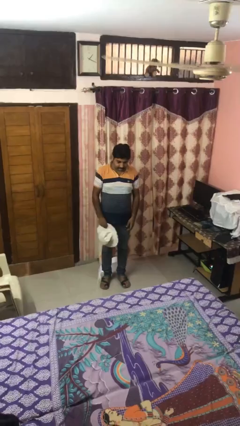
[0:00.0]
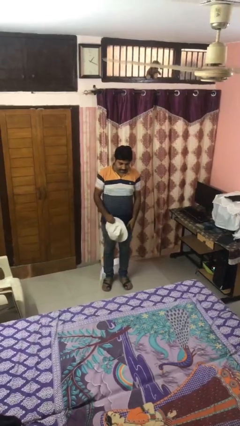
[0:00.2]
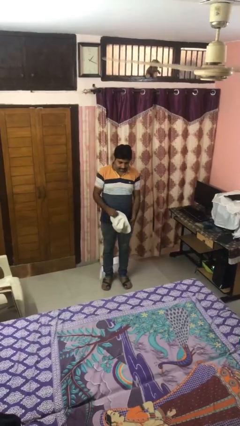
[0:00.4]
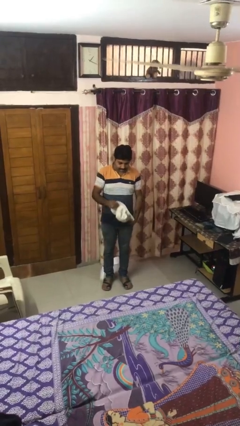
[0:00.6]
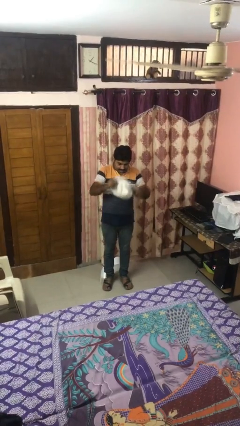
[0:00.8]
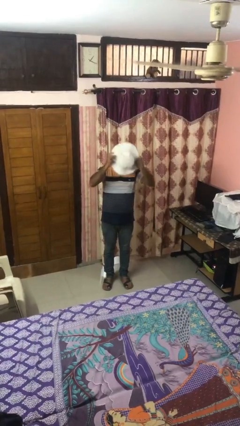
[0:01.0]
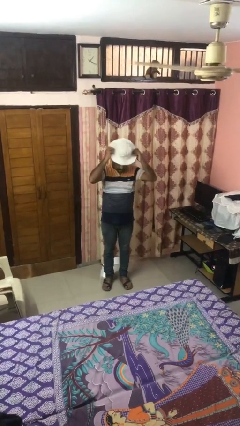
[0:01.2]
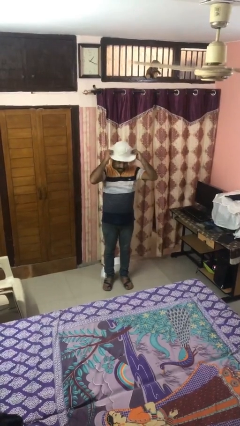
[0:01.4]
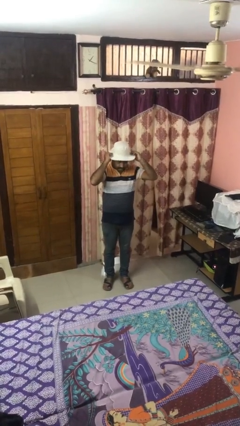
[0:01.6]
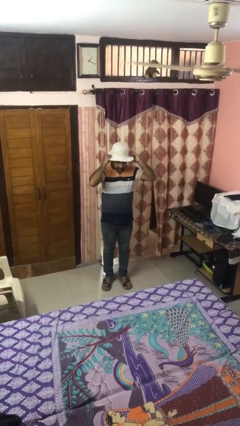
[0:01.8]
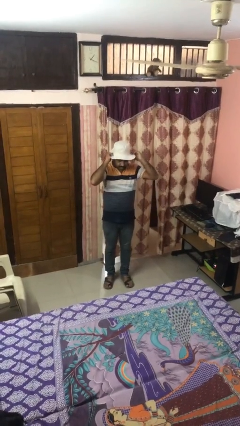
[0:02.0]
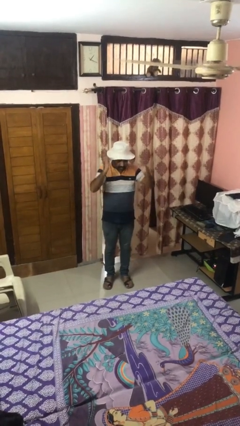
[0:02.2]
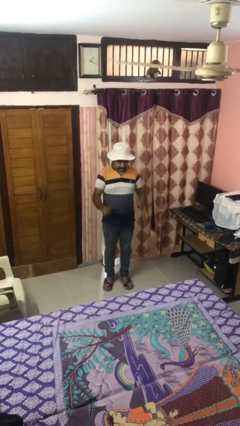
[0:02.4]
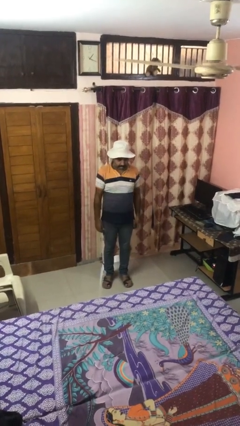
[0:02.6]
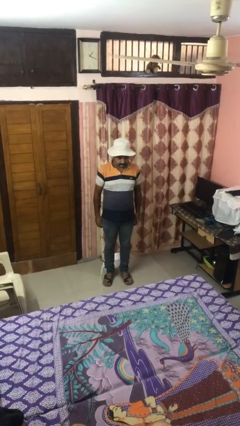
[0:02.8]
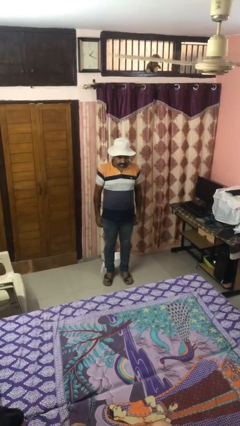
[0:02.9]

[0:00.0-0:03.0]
person puts on hat

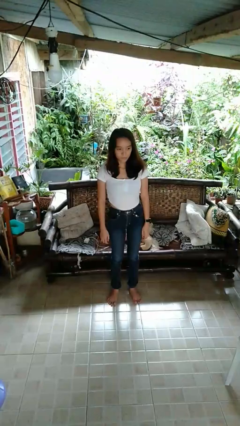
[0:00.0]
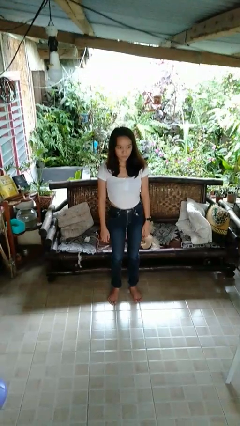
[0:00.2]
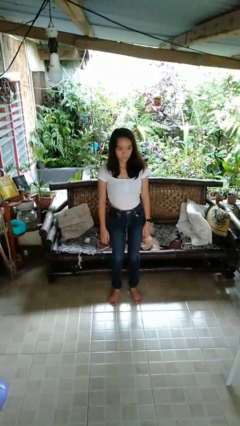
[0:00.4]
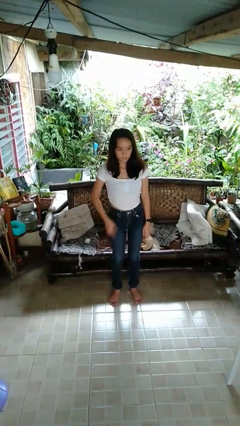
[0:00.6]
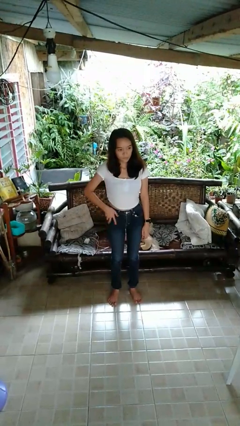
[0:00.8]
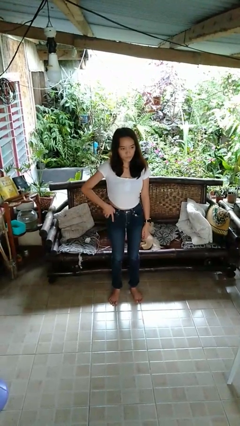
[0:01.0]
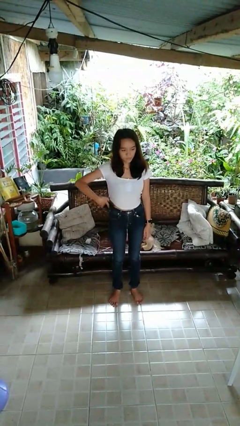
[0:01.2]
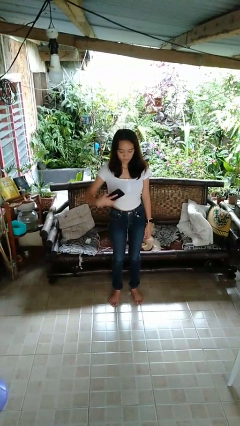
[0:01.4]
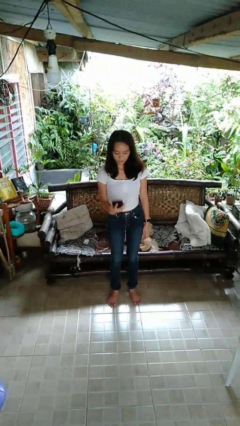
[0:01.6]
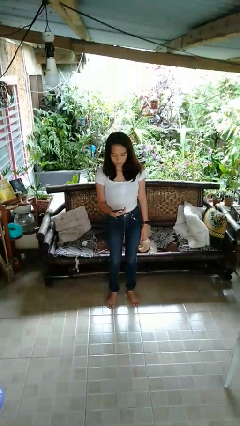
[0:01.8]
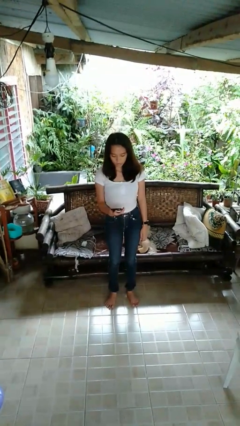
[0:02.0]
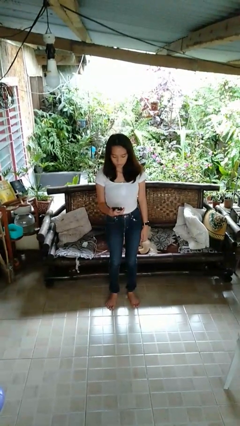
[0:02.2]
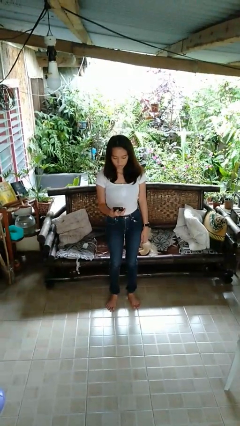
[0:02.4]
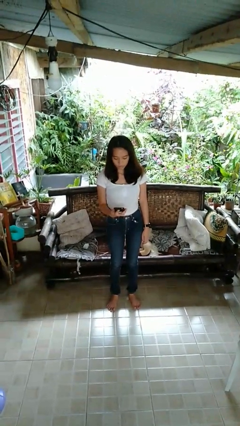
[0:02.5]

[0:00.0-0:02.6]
person takes phone from pocket

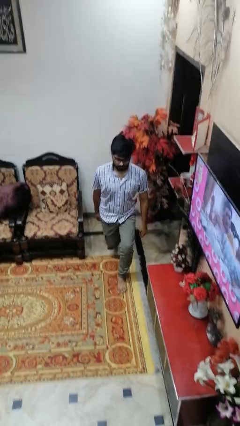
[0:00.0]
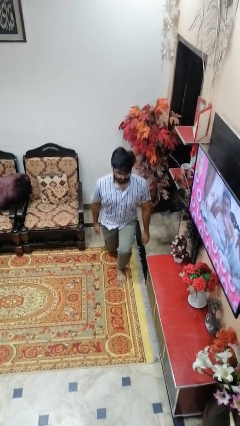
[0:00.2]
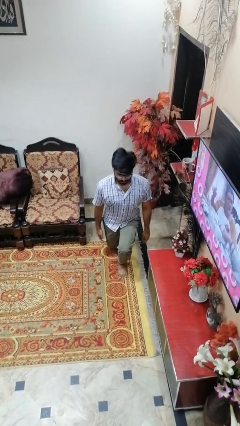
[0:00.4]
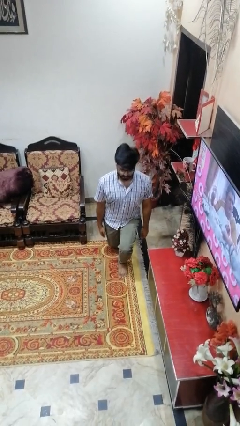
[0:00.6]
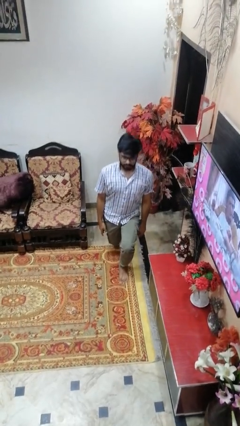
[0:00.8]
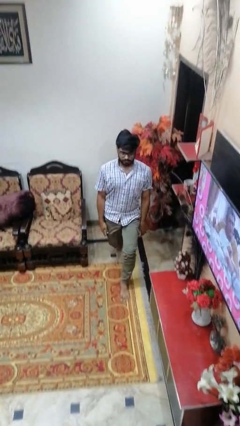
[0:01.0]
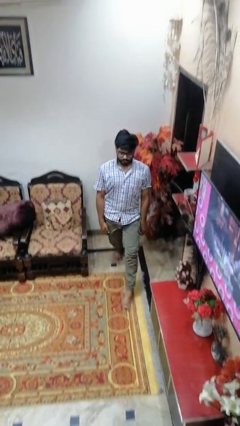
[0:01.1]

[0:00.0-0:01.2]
person exercises with lunges

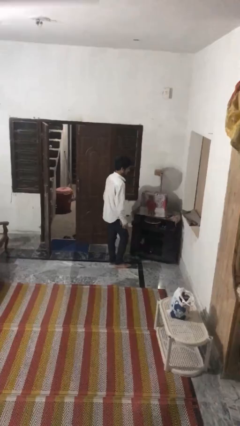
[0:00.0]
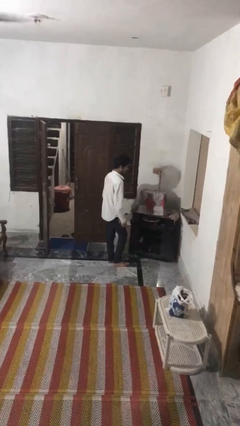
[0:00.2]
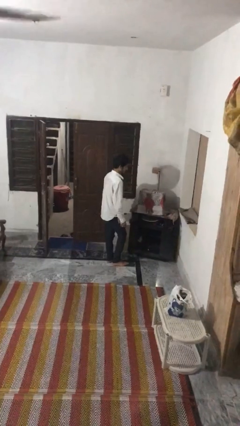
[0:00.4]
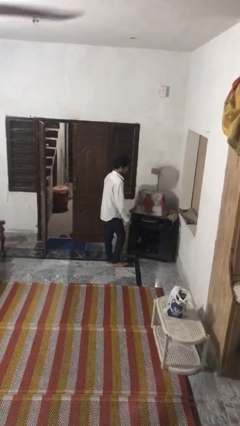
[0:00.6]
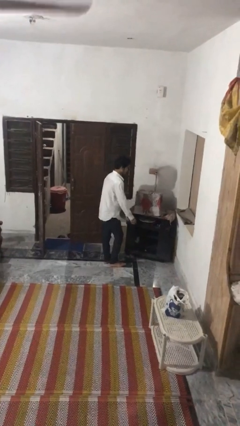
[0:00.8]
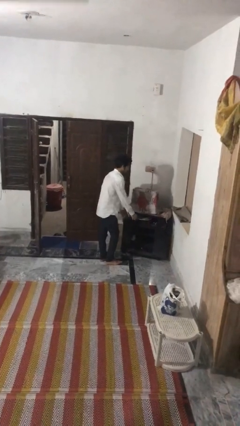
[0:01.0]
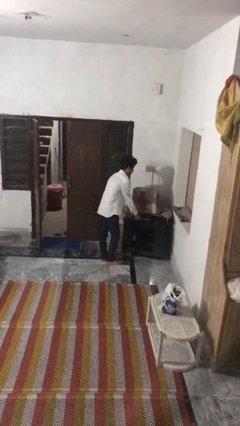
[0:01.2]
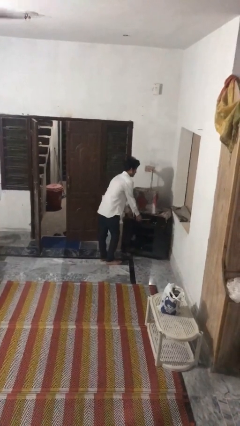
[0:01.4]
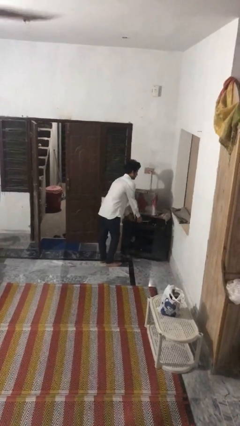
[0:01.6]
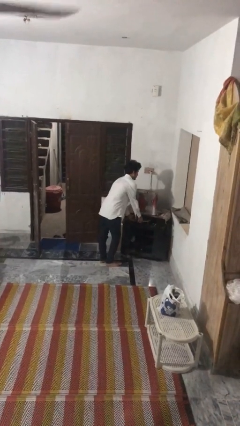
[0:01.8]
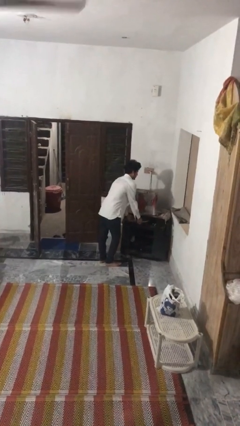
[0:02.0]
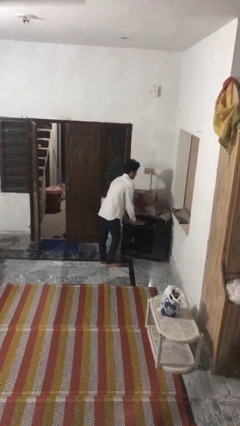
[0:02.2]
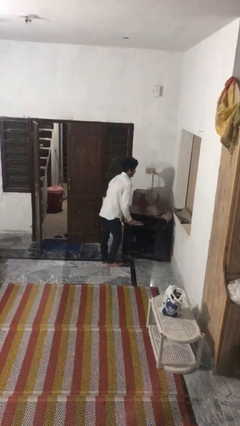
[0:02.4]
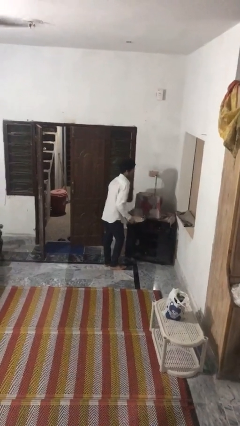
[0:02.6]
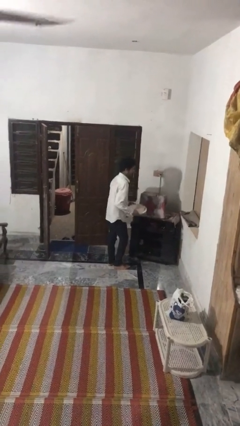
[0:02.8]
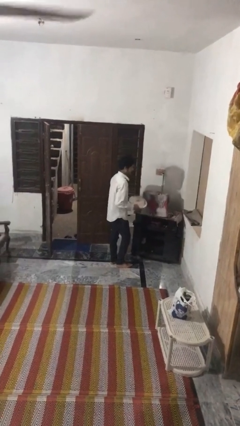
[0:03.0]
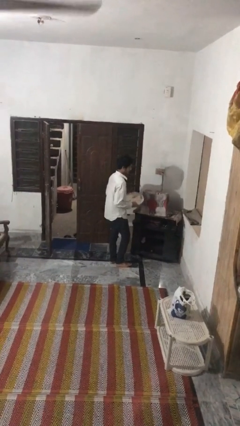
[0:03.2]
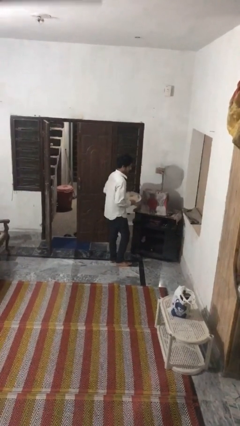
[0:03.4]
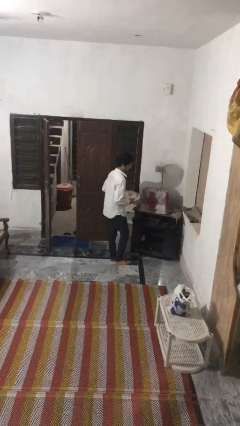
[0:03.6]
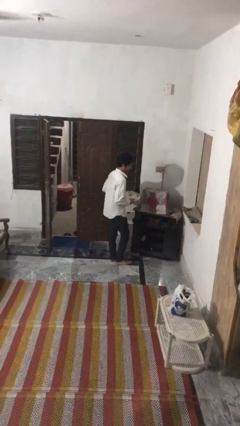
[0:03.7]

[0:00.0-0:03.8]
person picks up object from cabinet

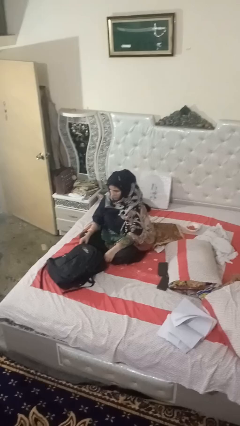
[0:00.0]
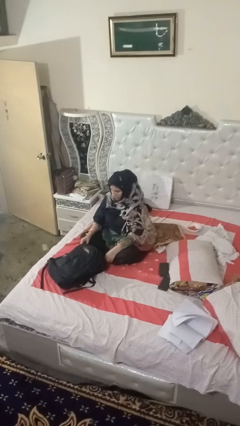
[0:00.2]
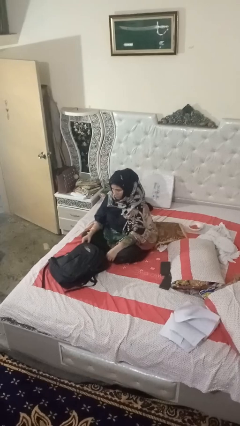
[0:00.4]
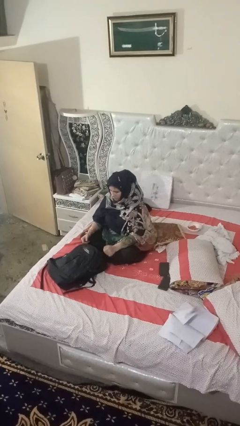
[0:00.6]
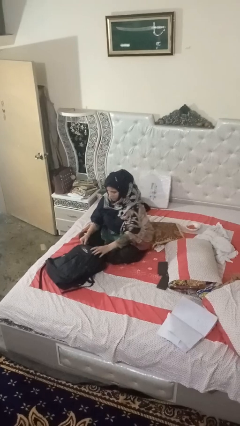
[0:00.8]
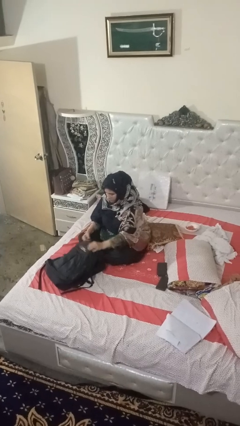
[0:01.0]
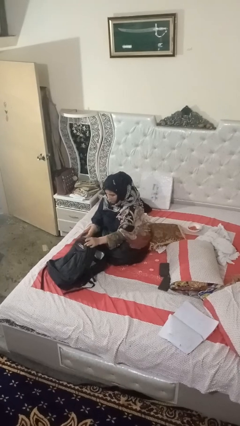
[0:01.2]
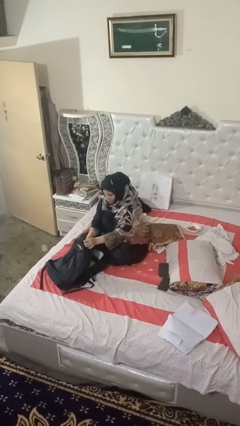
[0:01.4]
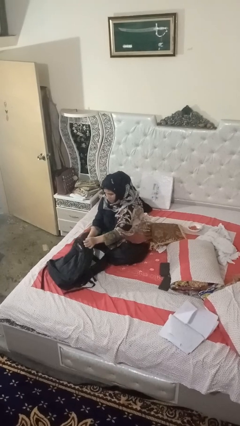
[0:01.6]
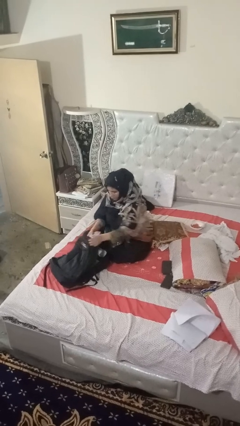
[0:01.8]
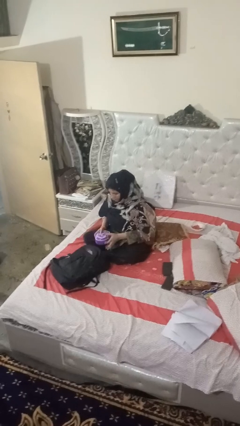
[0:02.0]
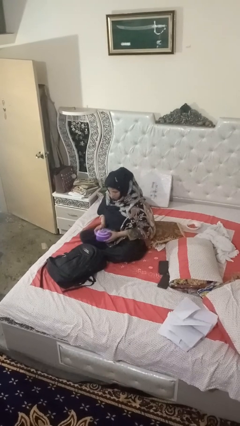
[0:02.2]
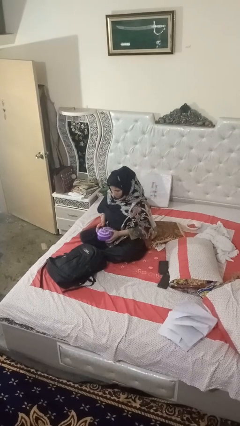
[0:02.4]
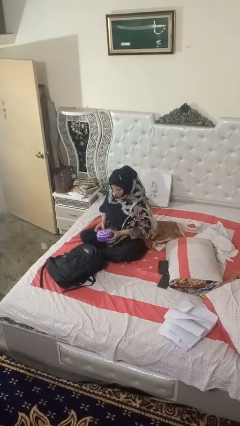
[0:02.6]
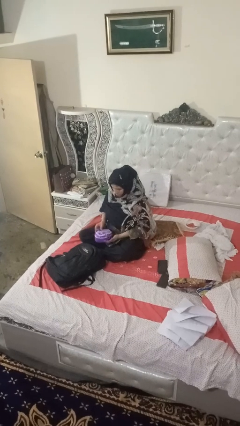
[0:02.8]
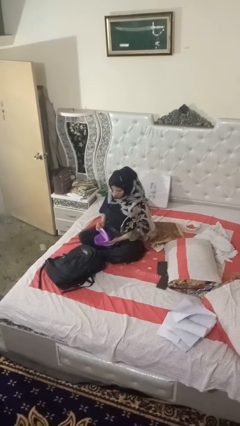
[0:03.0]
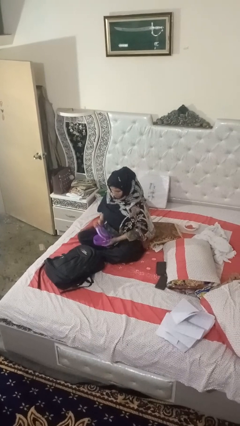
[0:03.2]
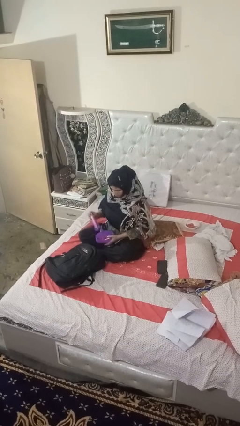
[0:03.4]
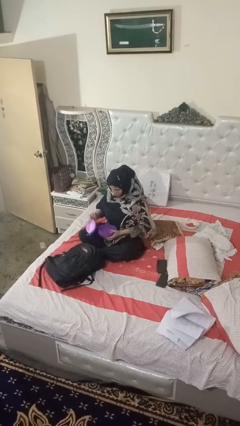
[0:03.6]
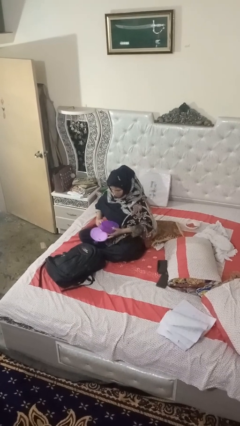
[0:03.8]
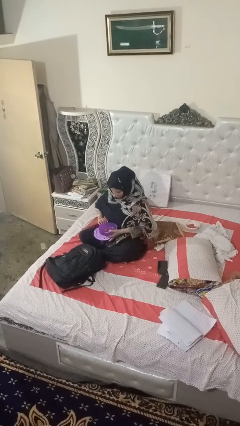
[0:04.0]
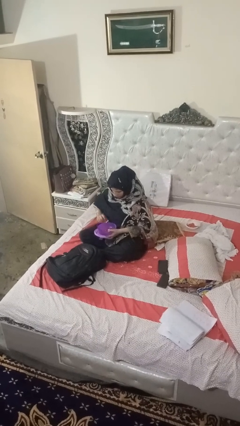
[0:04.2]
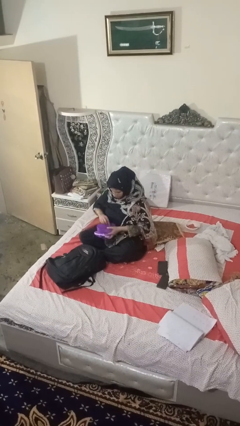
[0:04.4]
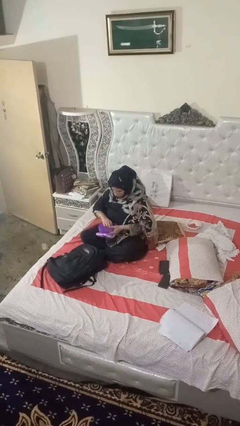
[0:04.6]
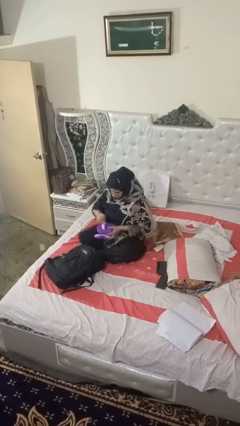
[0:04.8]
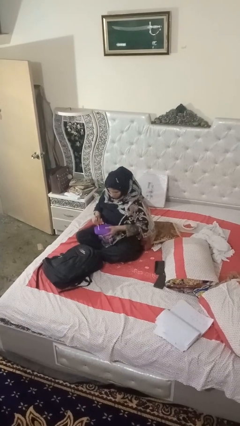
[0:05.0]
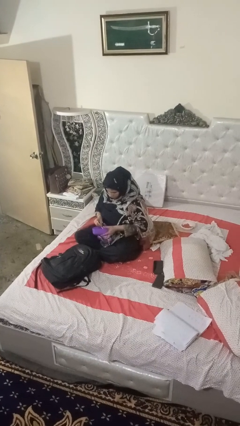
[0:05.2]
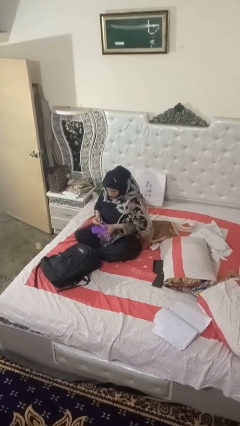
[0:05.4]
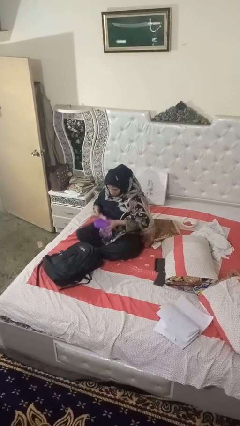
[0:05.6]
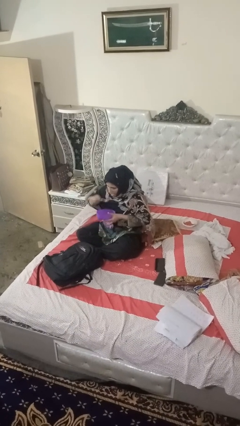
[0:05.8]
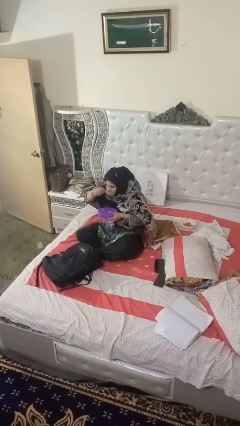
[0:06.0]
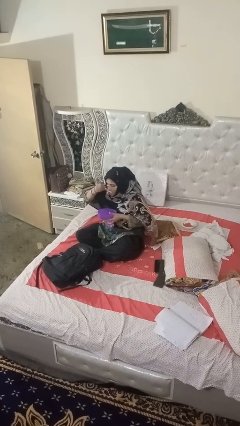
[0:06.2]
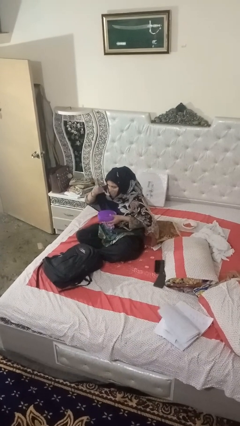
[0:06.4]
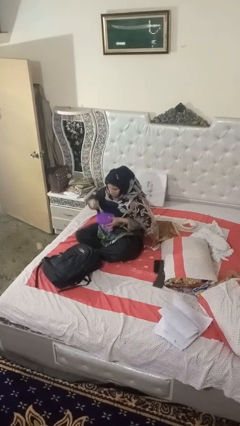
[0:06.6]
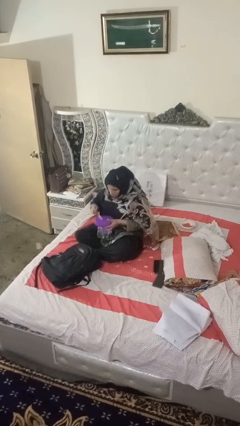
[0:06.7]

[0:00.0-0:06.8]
person eats snack from bag
